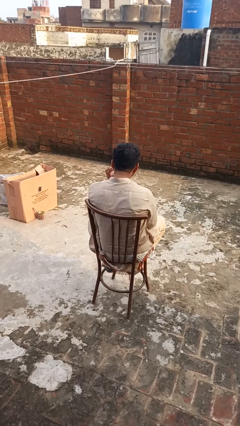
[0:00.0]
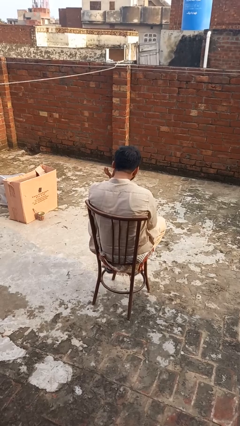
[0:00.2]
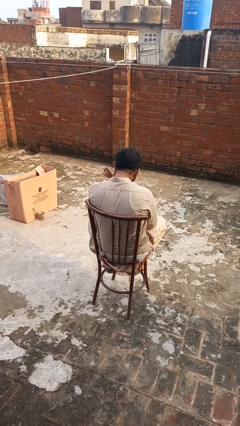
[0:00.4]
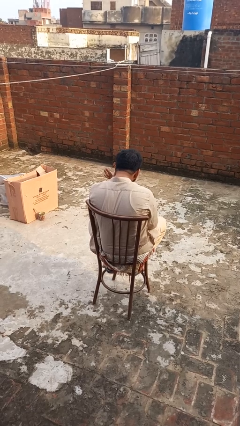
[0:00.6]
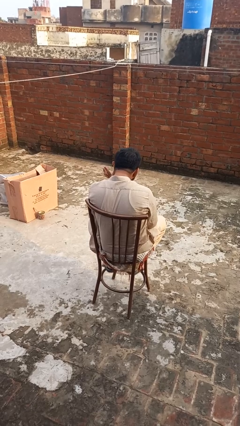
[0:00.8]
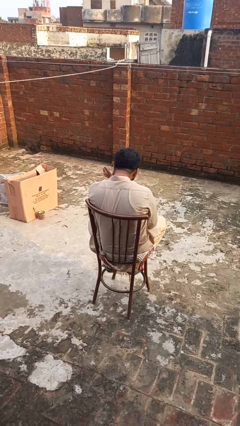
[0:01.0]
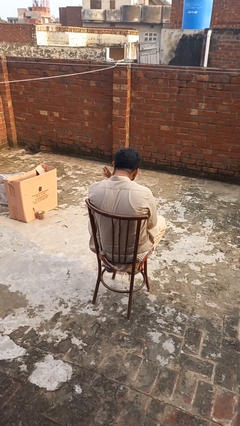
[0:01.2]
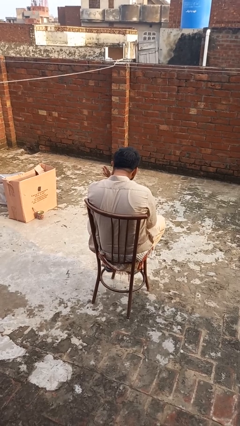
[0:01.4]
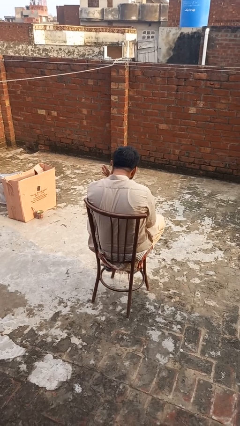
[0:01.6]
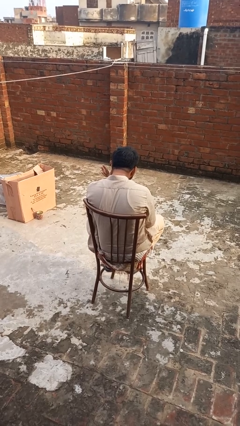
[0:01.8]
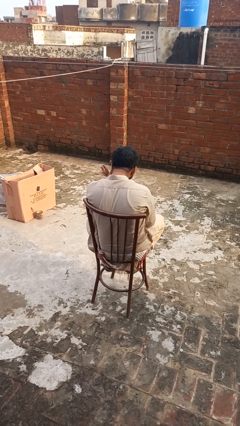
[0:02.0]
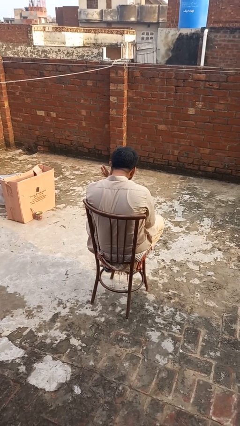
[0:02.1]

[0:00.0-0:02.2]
person gestures listen closely

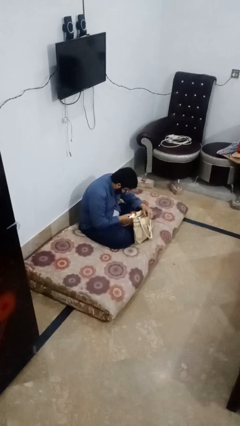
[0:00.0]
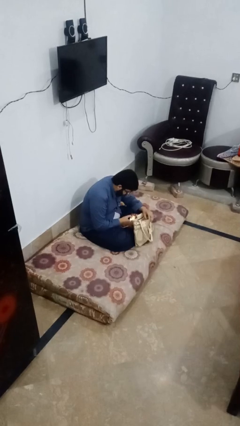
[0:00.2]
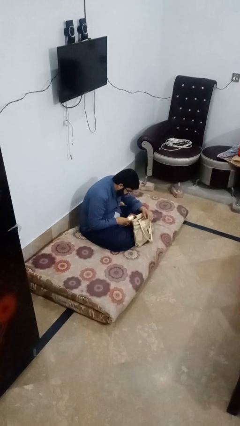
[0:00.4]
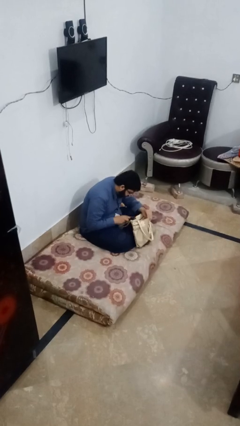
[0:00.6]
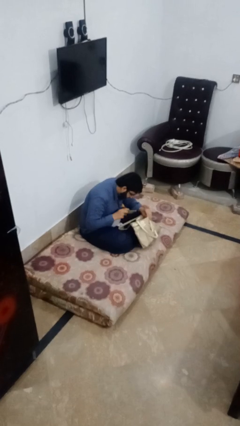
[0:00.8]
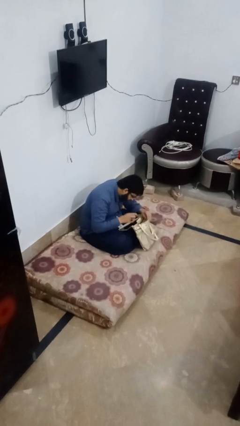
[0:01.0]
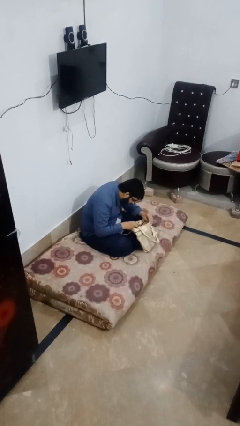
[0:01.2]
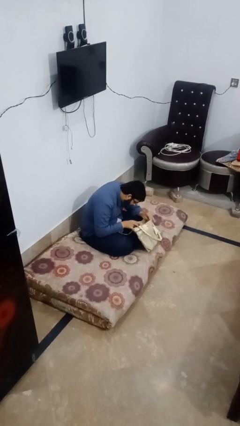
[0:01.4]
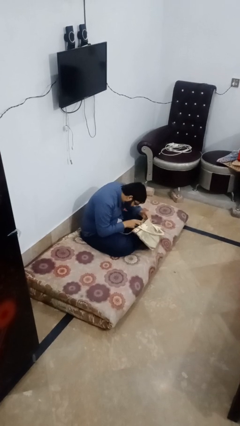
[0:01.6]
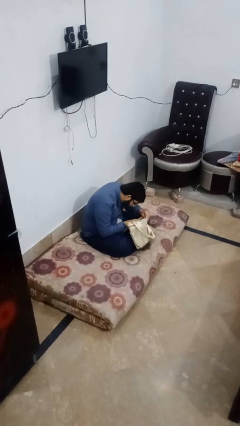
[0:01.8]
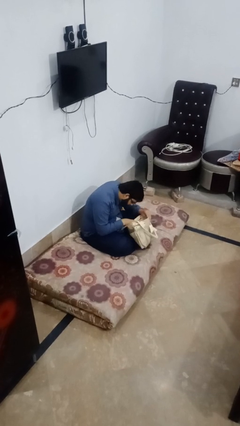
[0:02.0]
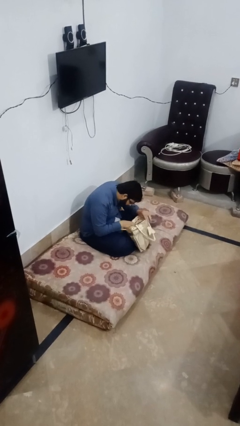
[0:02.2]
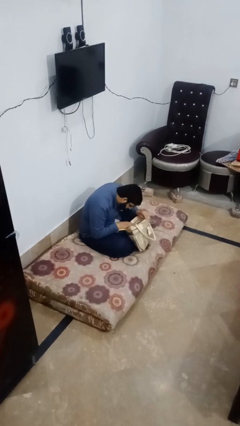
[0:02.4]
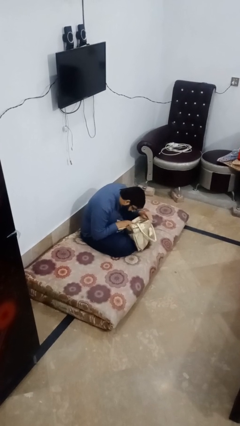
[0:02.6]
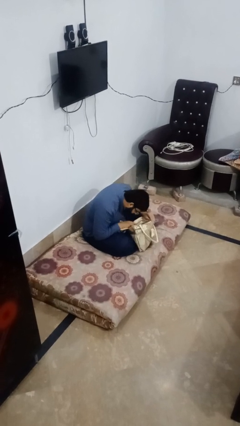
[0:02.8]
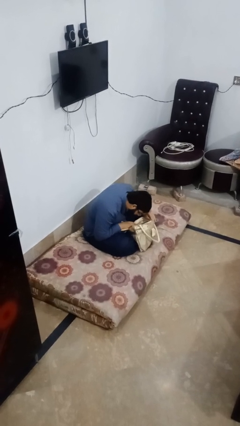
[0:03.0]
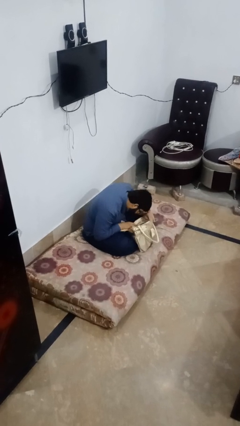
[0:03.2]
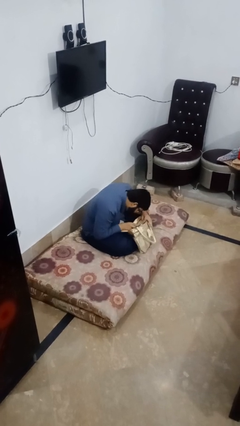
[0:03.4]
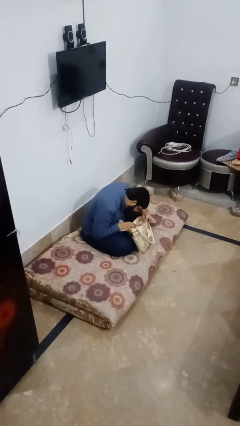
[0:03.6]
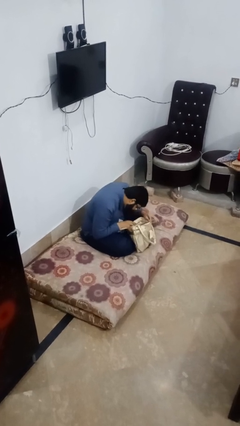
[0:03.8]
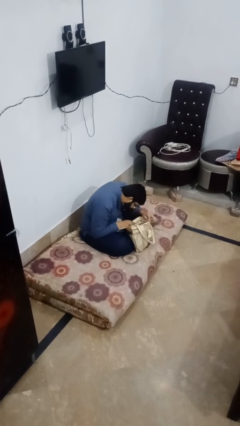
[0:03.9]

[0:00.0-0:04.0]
person searches in bag

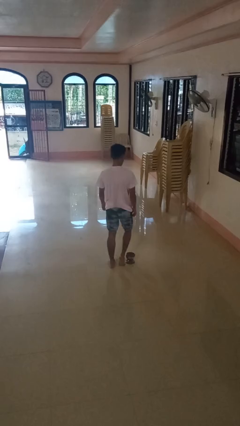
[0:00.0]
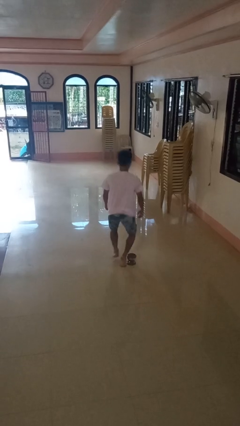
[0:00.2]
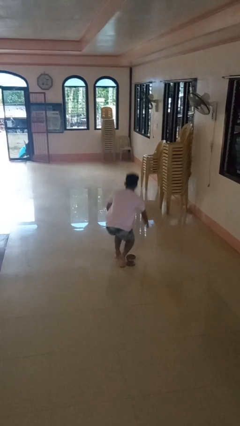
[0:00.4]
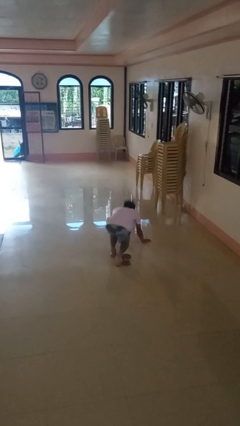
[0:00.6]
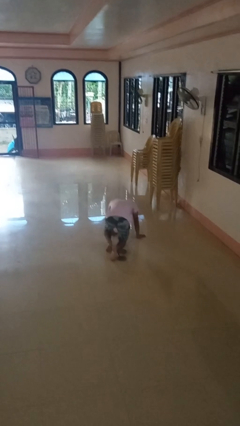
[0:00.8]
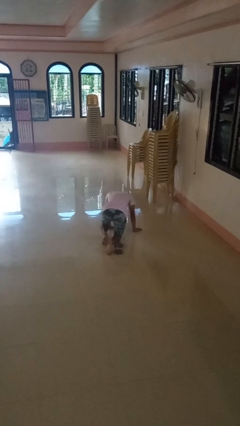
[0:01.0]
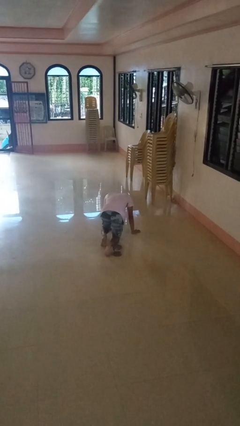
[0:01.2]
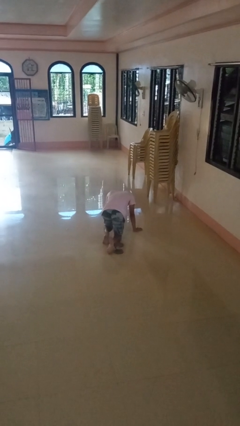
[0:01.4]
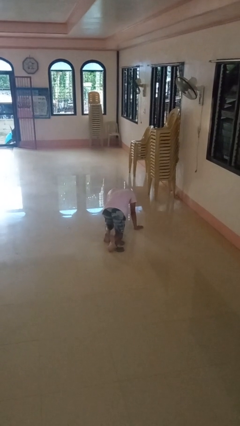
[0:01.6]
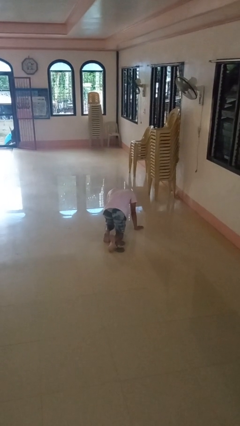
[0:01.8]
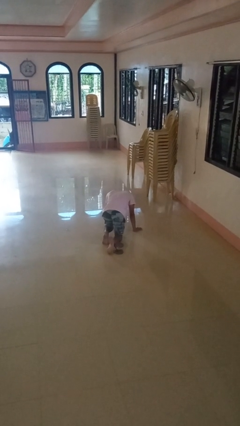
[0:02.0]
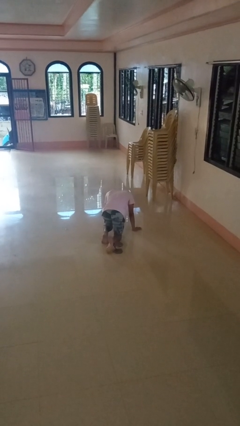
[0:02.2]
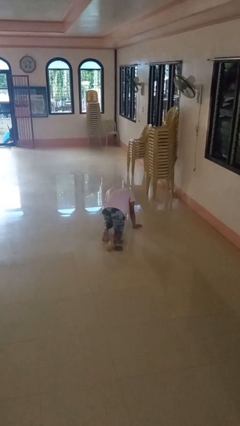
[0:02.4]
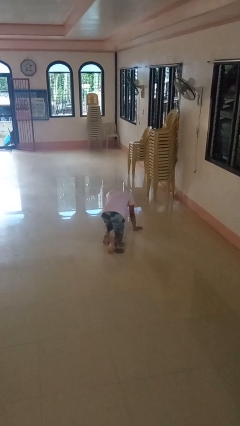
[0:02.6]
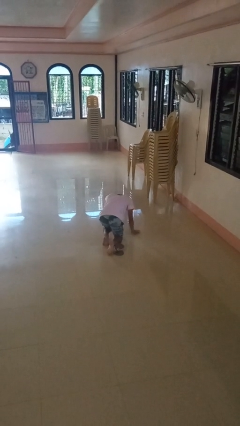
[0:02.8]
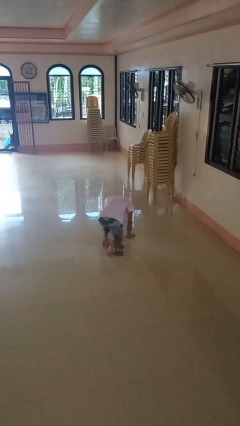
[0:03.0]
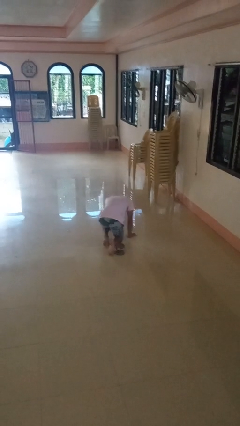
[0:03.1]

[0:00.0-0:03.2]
person trips on object on floor

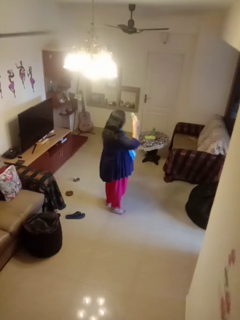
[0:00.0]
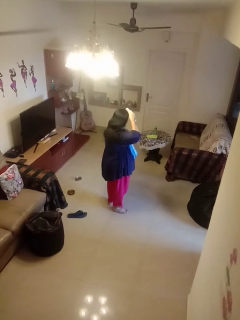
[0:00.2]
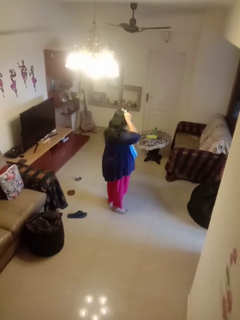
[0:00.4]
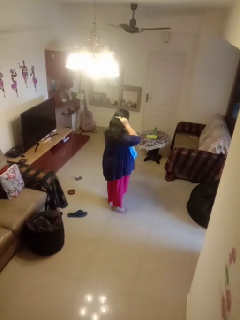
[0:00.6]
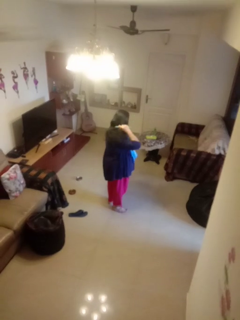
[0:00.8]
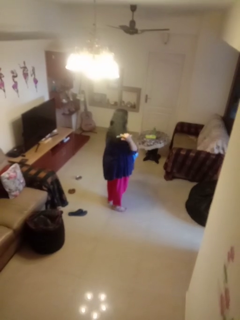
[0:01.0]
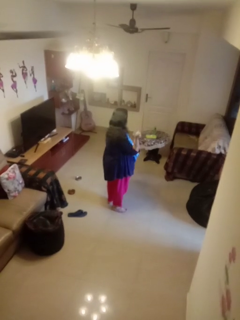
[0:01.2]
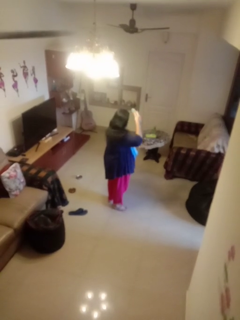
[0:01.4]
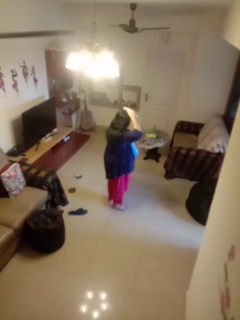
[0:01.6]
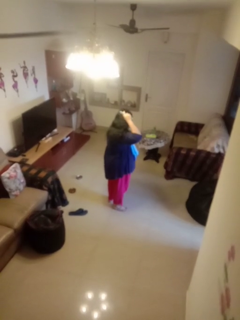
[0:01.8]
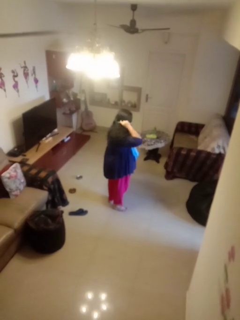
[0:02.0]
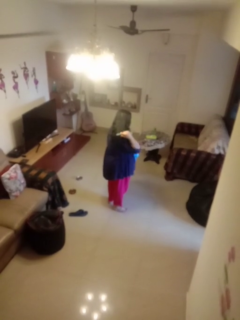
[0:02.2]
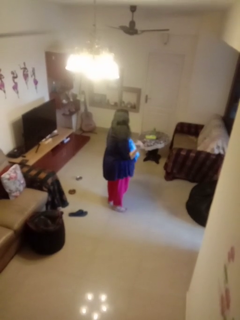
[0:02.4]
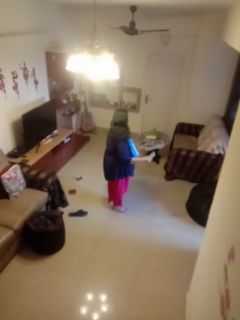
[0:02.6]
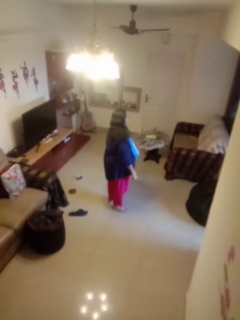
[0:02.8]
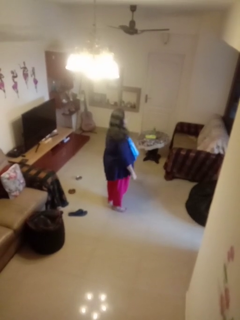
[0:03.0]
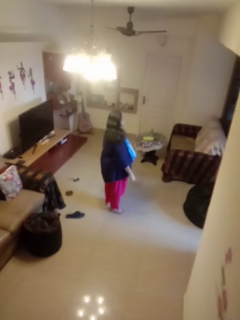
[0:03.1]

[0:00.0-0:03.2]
person brushes hair

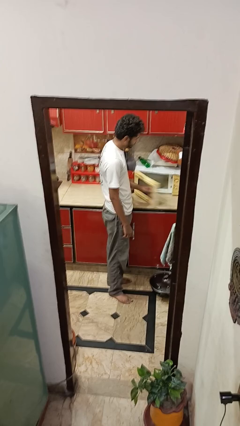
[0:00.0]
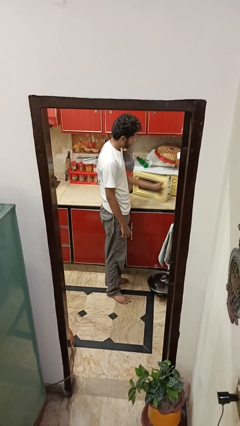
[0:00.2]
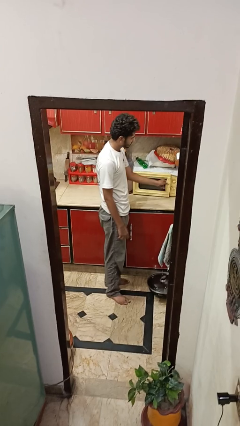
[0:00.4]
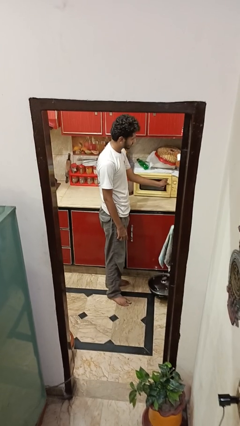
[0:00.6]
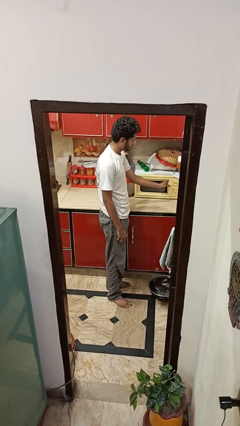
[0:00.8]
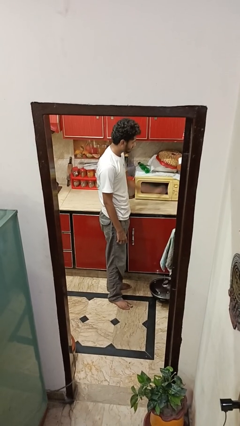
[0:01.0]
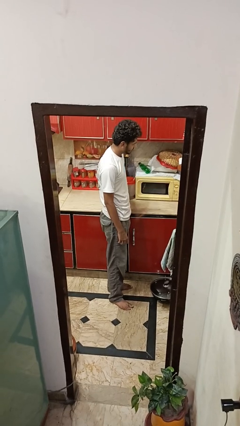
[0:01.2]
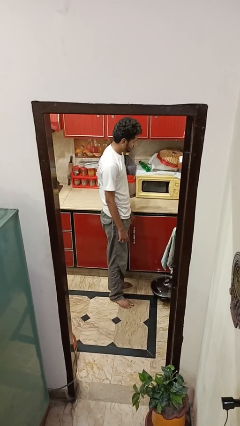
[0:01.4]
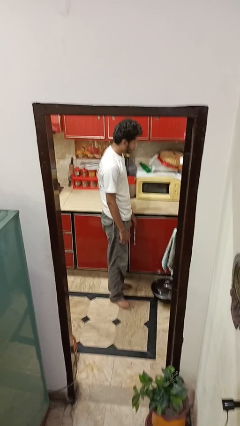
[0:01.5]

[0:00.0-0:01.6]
person closes oven door

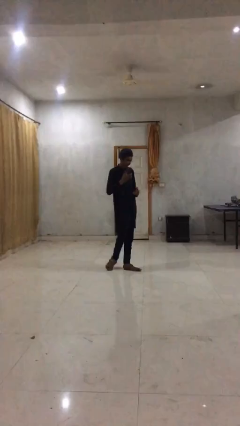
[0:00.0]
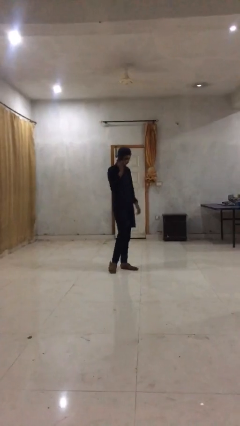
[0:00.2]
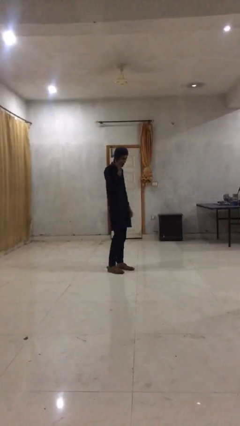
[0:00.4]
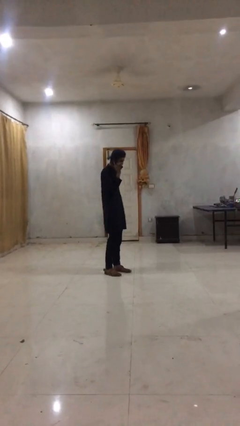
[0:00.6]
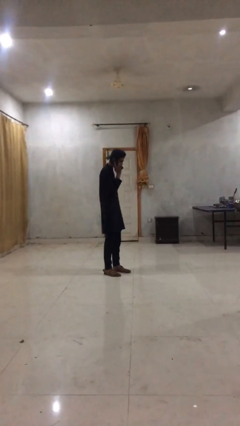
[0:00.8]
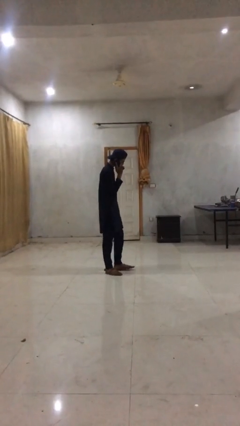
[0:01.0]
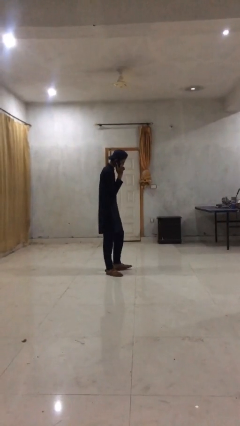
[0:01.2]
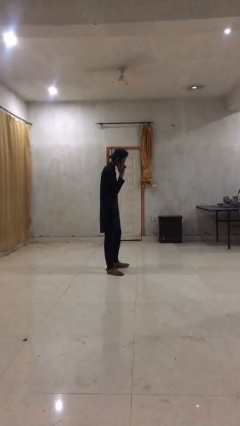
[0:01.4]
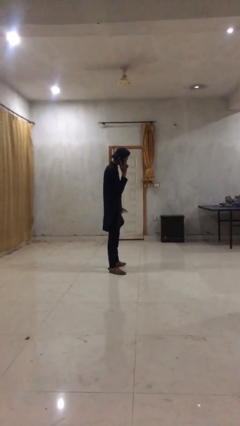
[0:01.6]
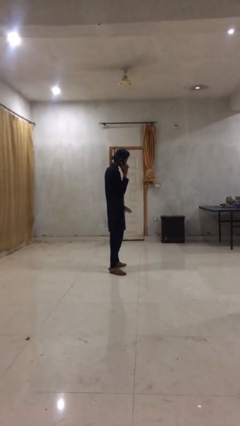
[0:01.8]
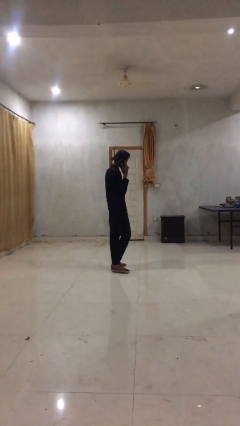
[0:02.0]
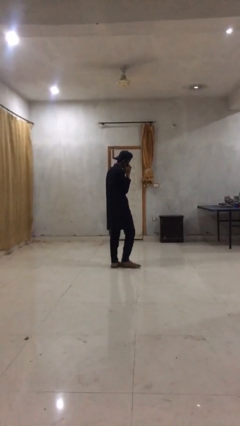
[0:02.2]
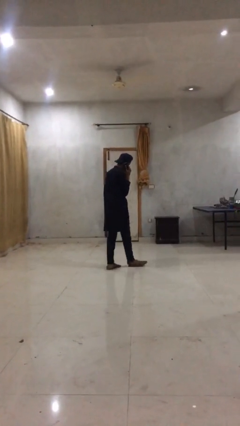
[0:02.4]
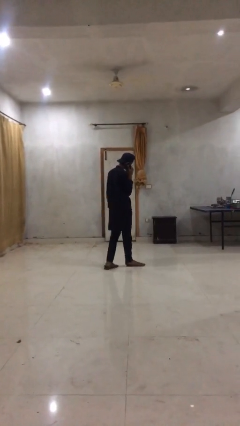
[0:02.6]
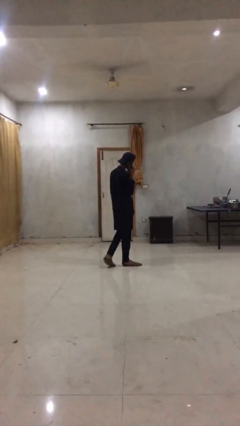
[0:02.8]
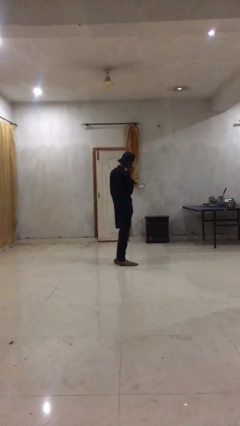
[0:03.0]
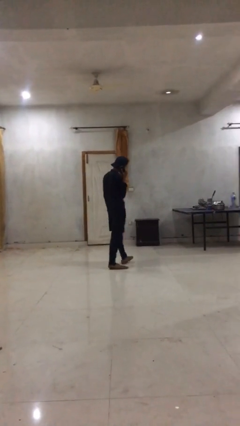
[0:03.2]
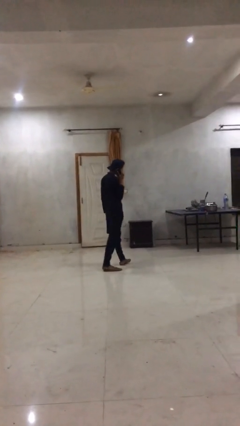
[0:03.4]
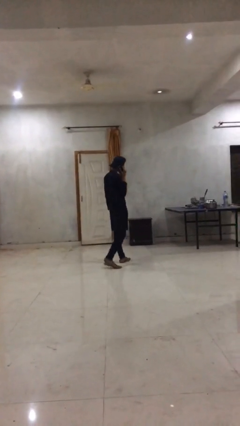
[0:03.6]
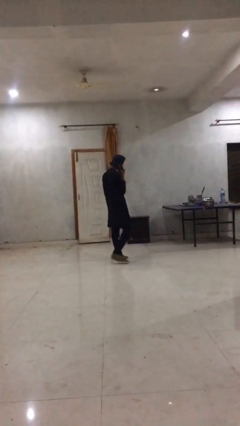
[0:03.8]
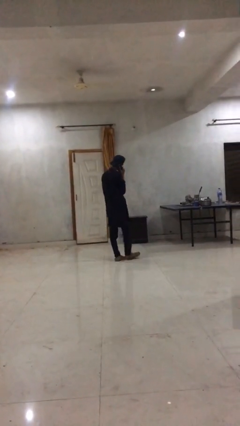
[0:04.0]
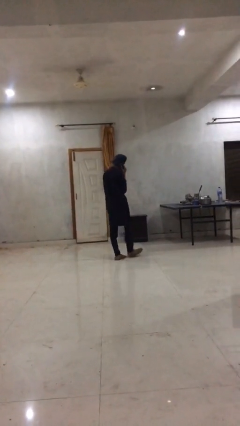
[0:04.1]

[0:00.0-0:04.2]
person talks on phone
